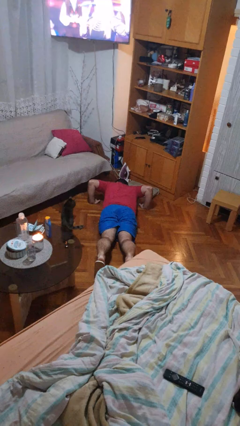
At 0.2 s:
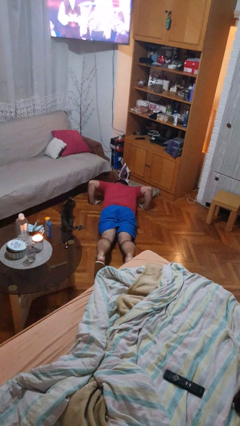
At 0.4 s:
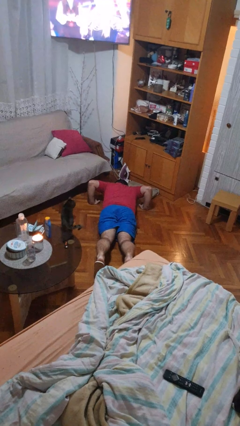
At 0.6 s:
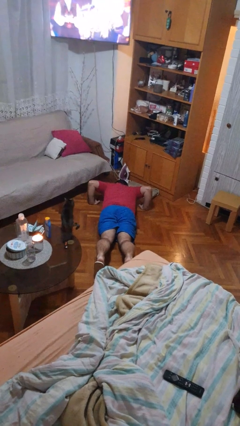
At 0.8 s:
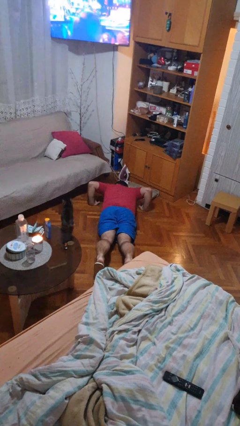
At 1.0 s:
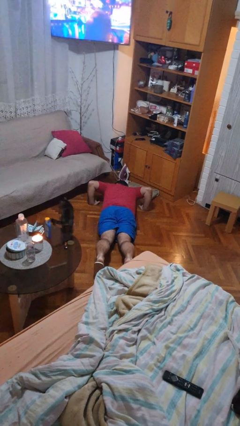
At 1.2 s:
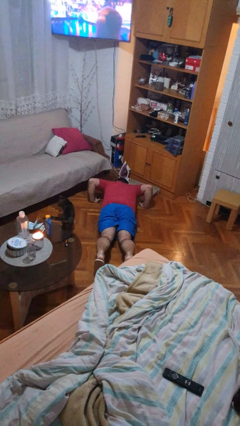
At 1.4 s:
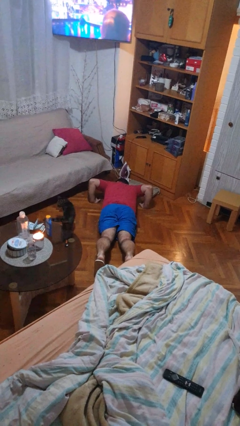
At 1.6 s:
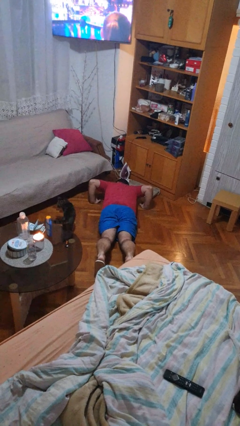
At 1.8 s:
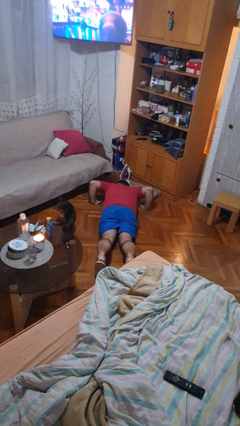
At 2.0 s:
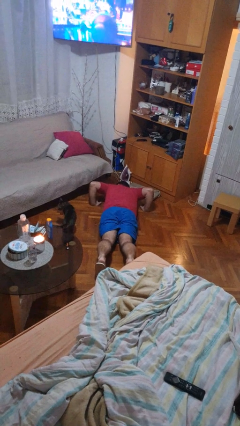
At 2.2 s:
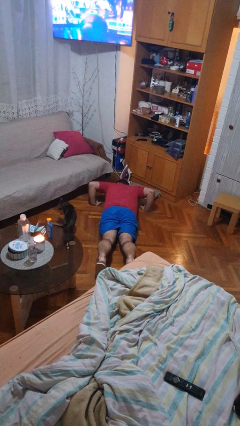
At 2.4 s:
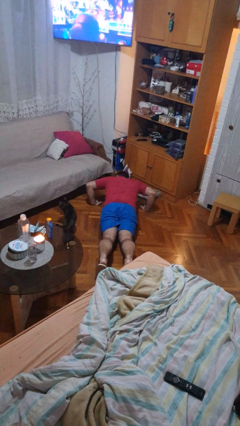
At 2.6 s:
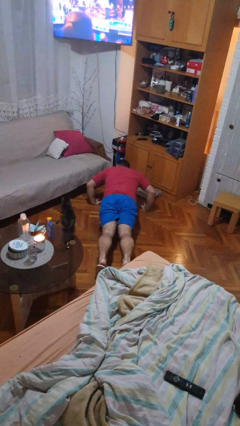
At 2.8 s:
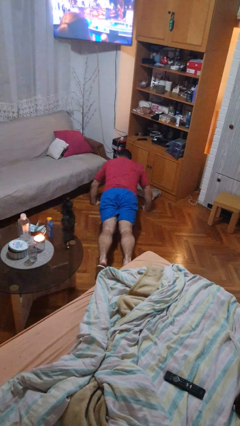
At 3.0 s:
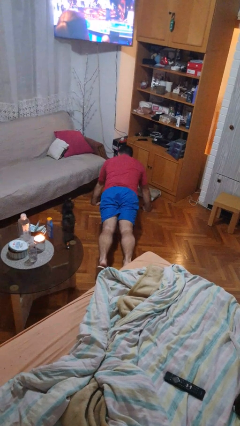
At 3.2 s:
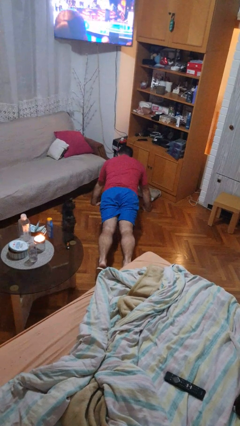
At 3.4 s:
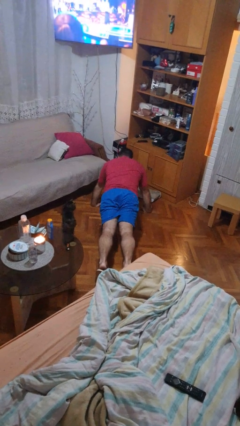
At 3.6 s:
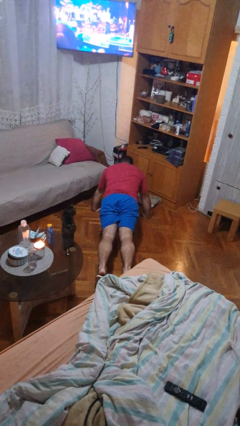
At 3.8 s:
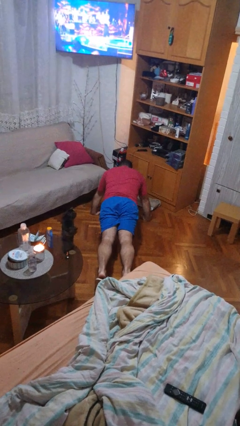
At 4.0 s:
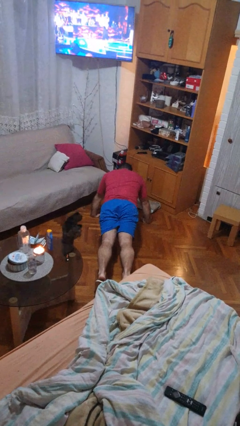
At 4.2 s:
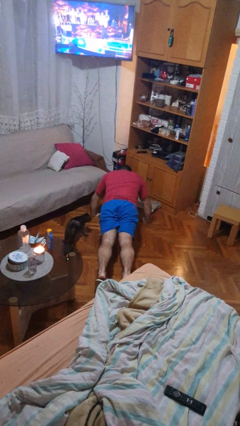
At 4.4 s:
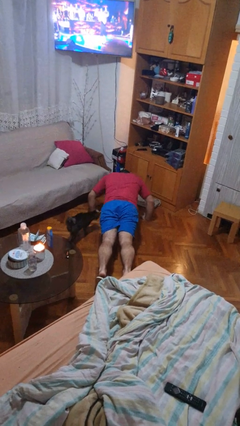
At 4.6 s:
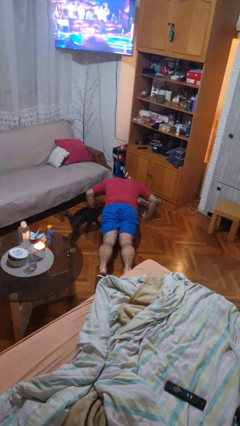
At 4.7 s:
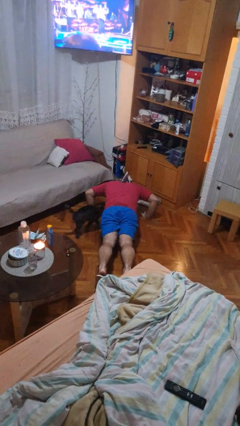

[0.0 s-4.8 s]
person exercises with pushup

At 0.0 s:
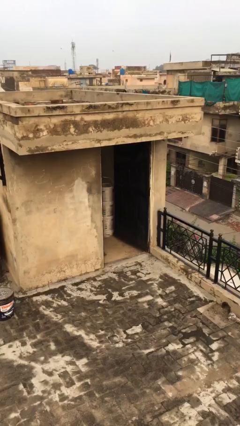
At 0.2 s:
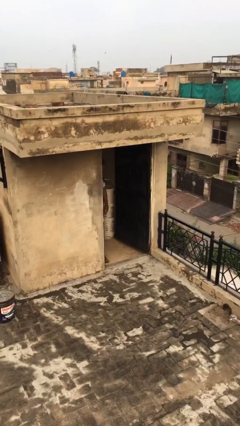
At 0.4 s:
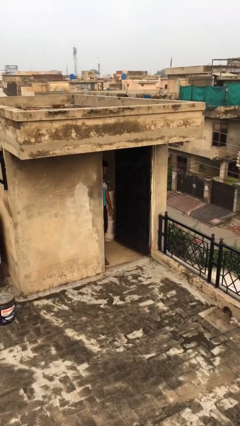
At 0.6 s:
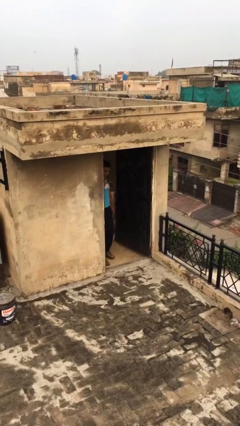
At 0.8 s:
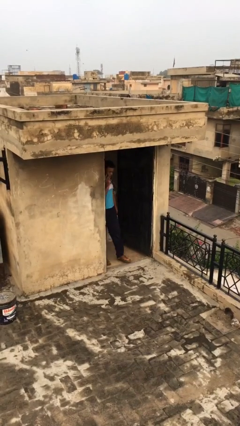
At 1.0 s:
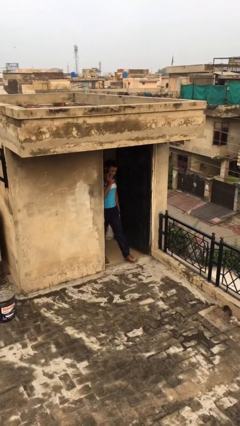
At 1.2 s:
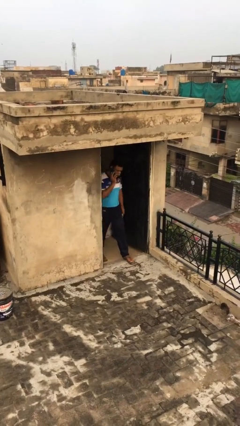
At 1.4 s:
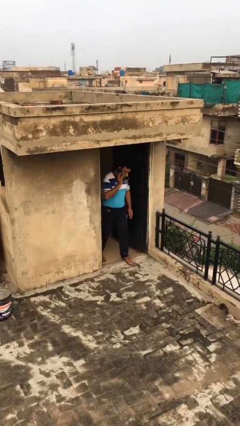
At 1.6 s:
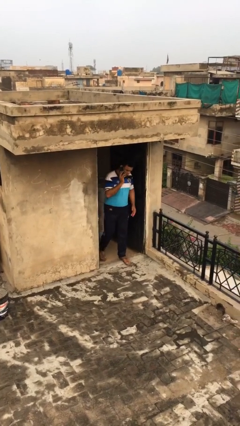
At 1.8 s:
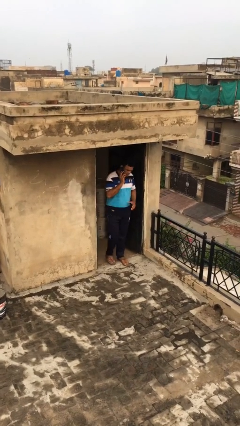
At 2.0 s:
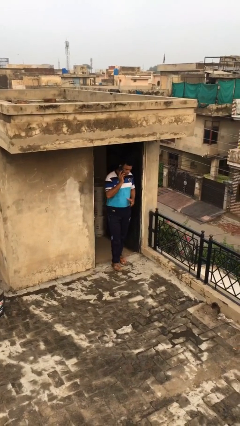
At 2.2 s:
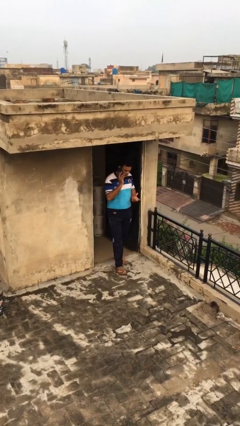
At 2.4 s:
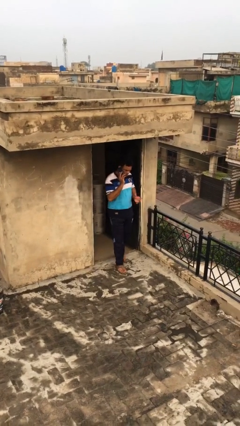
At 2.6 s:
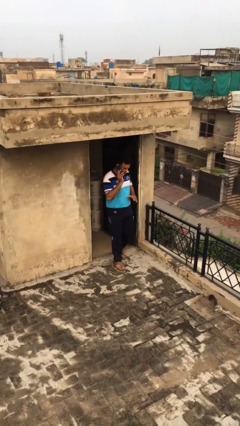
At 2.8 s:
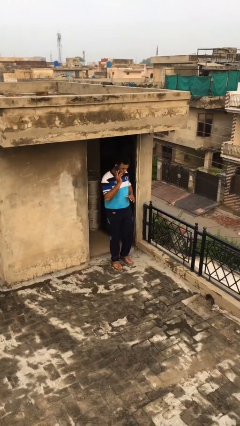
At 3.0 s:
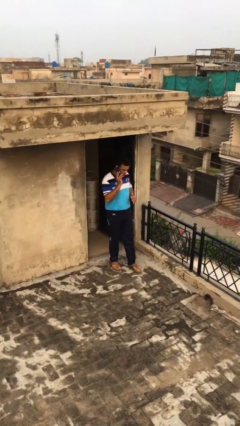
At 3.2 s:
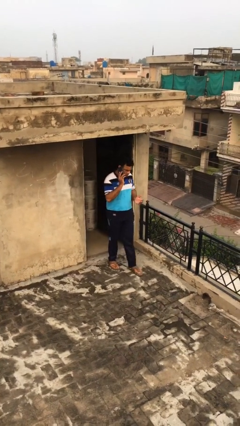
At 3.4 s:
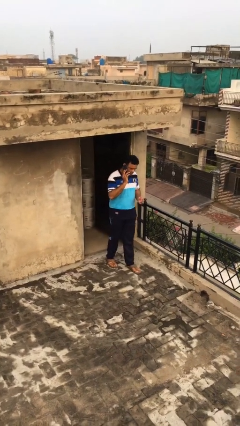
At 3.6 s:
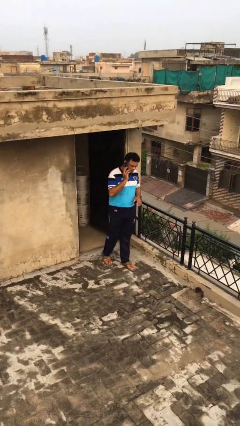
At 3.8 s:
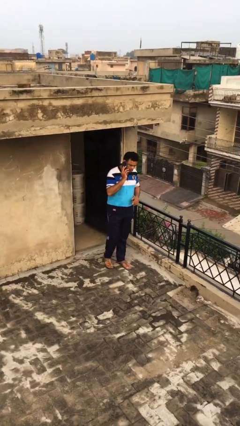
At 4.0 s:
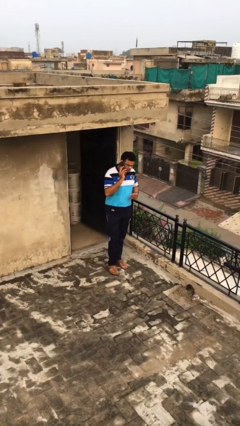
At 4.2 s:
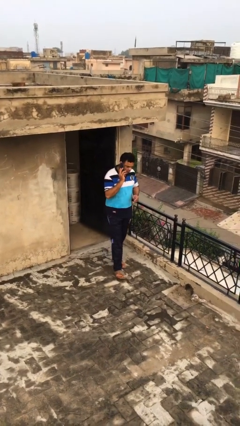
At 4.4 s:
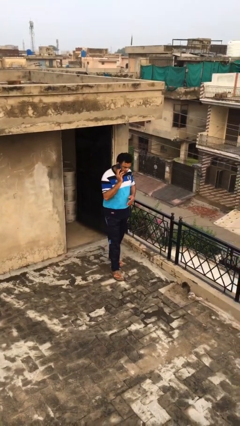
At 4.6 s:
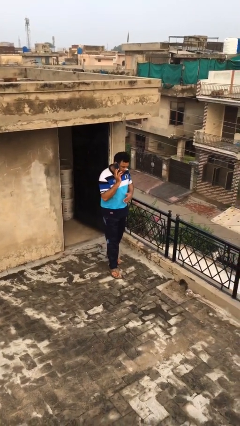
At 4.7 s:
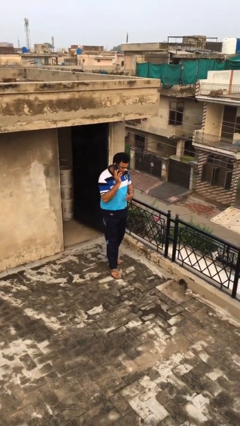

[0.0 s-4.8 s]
person enters scene through structure

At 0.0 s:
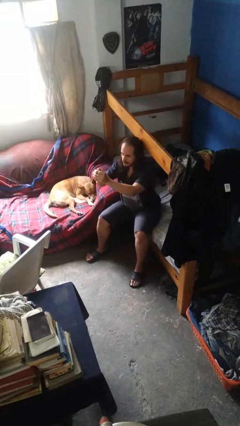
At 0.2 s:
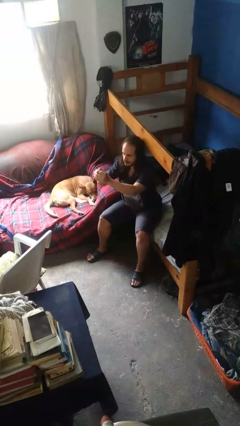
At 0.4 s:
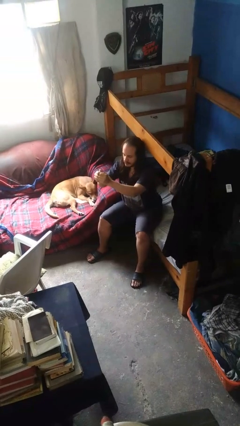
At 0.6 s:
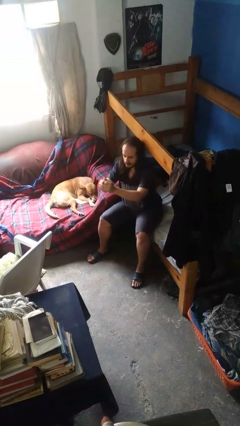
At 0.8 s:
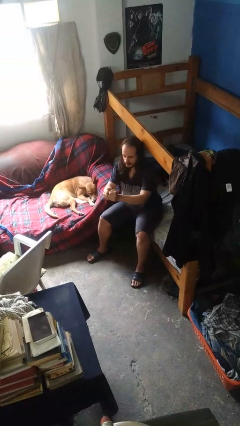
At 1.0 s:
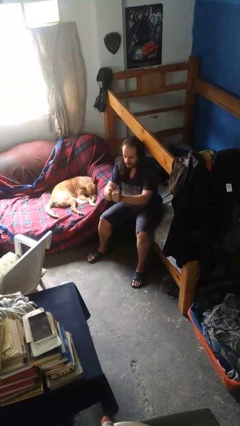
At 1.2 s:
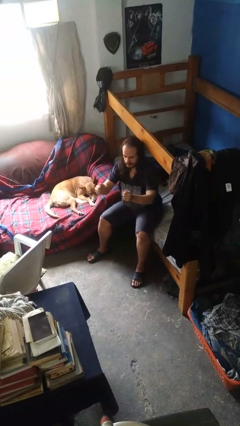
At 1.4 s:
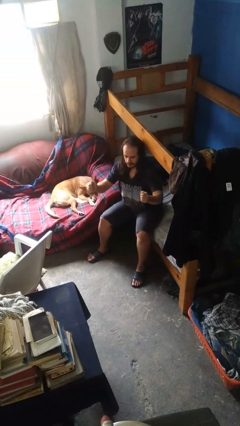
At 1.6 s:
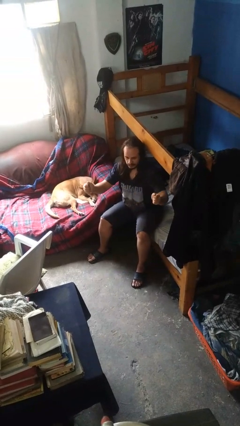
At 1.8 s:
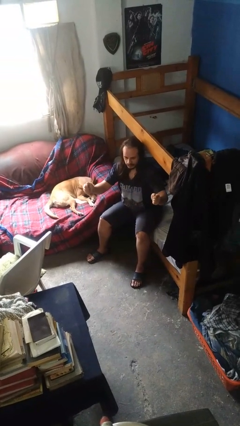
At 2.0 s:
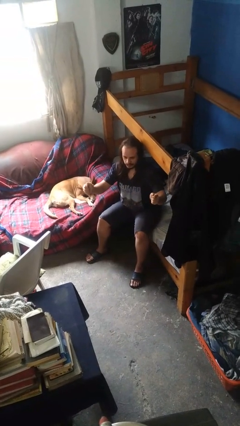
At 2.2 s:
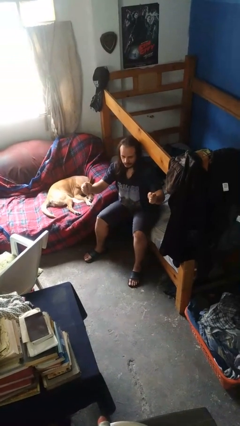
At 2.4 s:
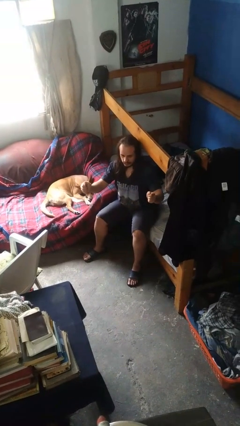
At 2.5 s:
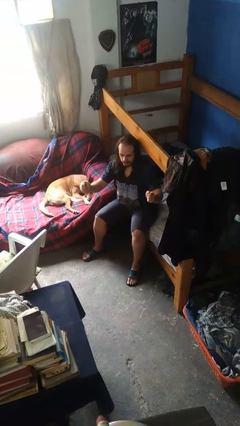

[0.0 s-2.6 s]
person gestures zoom in

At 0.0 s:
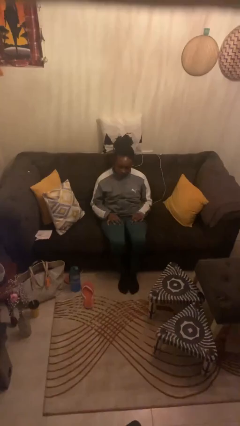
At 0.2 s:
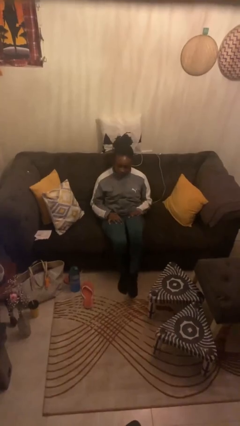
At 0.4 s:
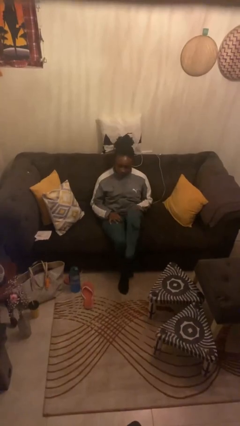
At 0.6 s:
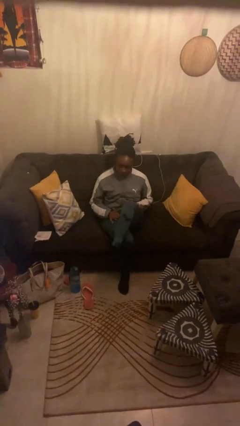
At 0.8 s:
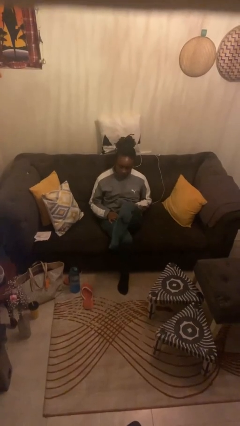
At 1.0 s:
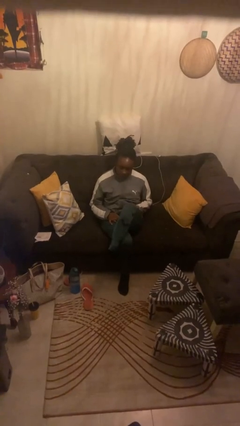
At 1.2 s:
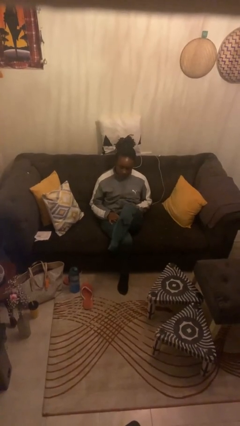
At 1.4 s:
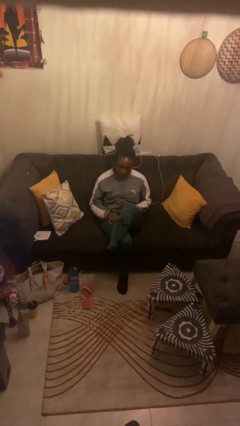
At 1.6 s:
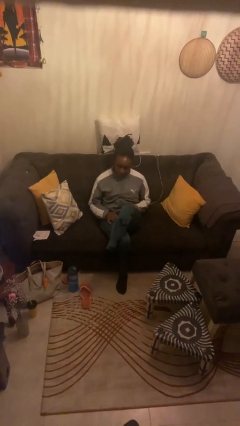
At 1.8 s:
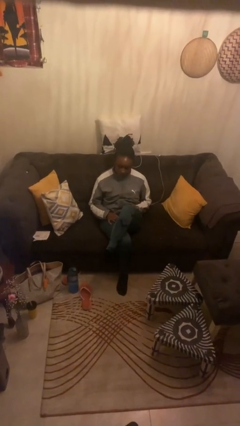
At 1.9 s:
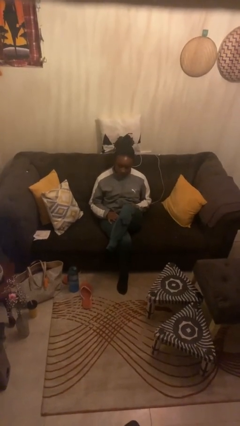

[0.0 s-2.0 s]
person crosses legs

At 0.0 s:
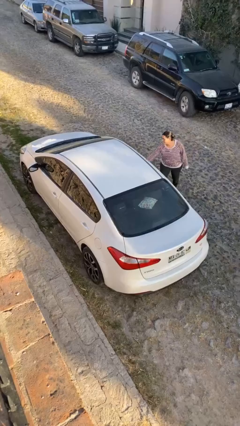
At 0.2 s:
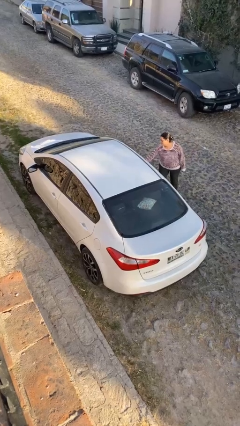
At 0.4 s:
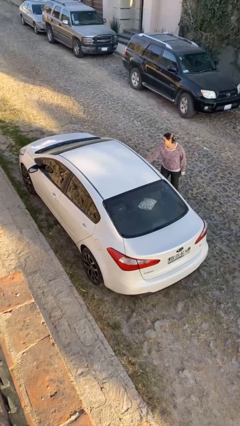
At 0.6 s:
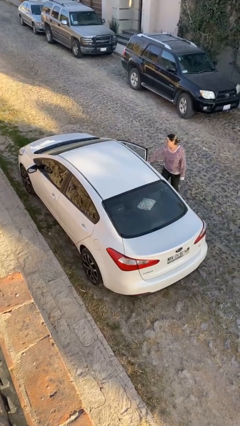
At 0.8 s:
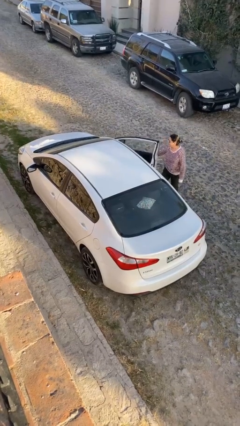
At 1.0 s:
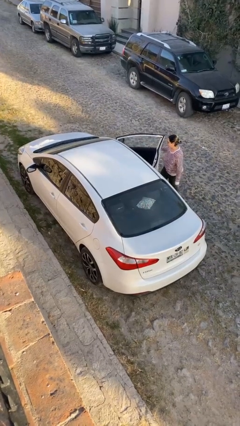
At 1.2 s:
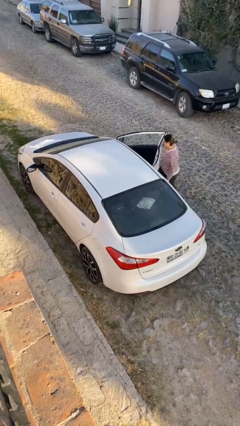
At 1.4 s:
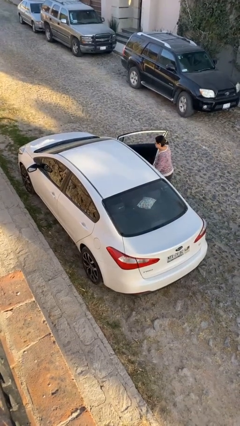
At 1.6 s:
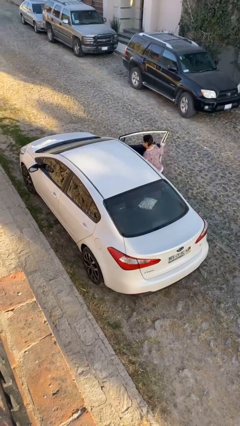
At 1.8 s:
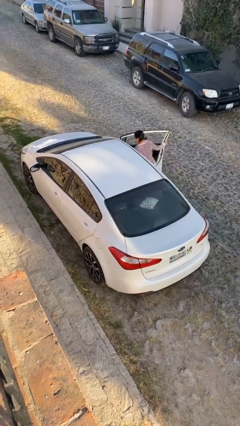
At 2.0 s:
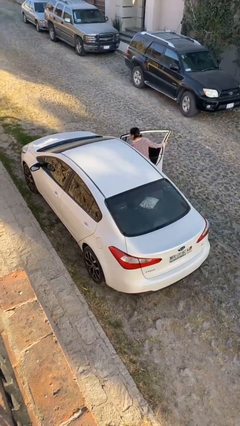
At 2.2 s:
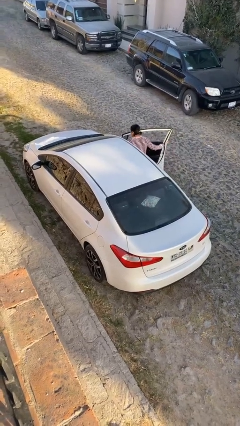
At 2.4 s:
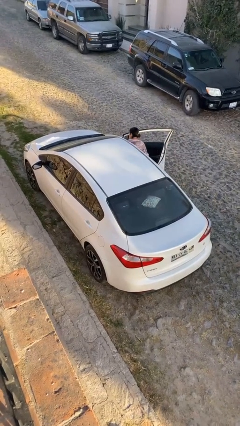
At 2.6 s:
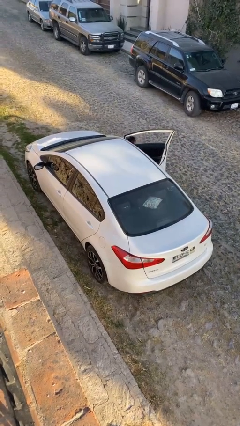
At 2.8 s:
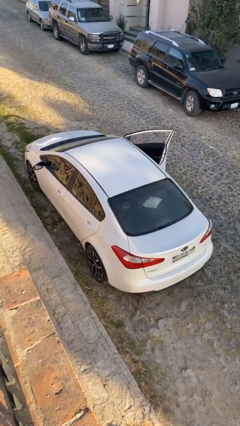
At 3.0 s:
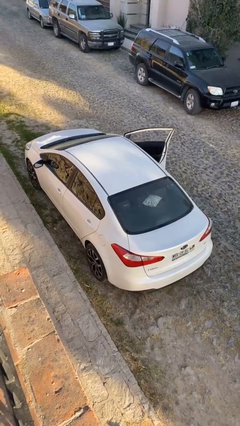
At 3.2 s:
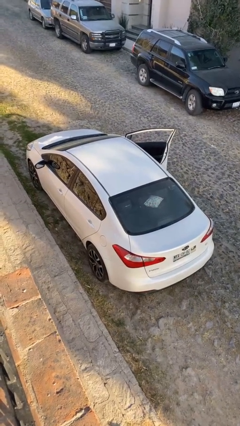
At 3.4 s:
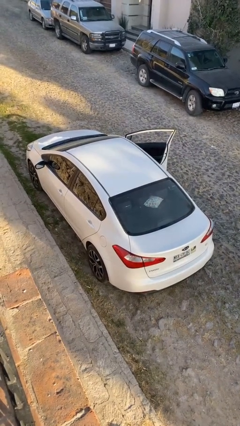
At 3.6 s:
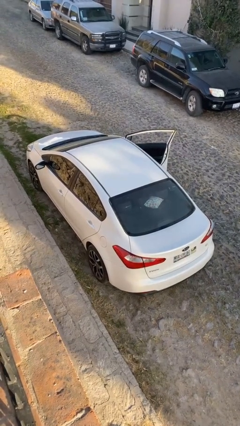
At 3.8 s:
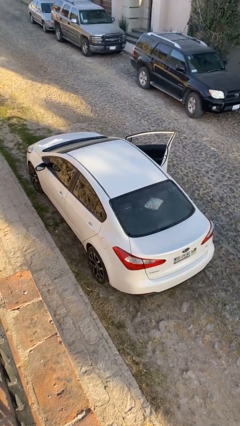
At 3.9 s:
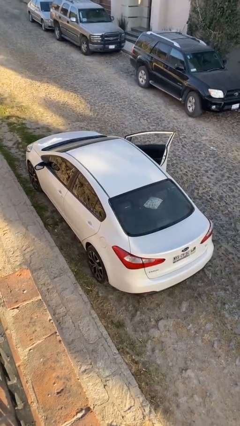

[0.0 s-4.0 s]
car picks up person
